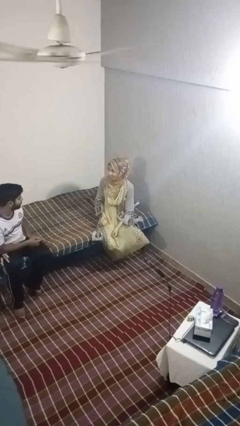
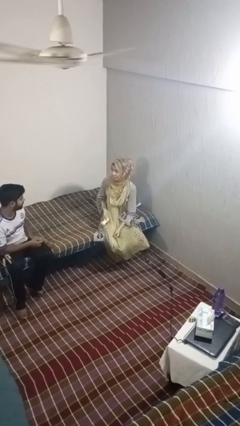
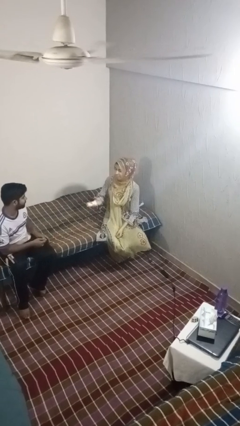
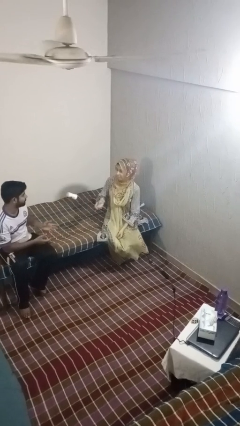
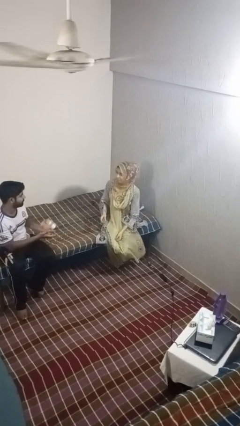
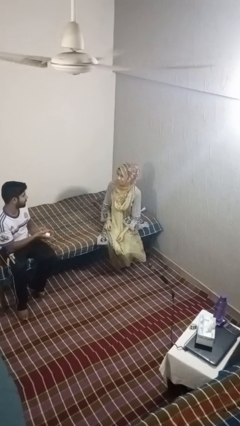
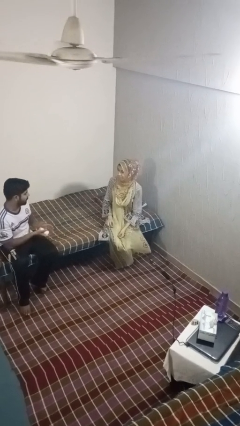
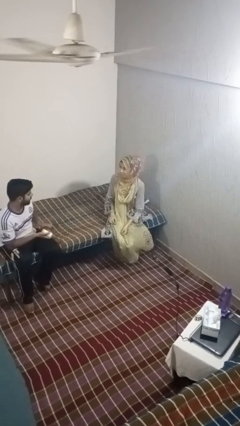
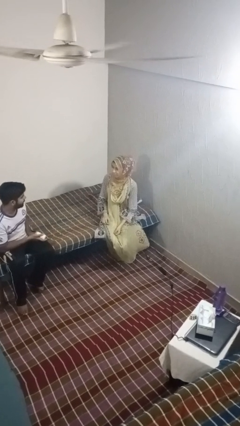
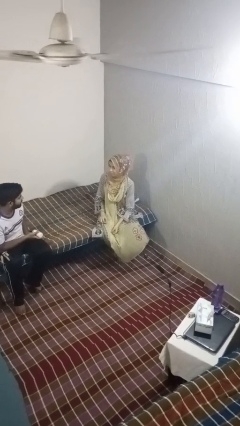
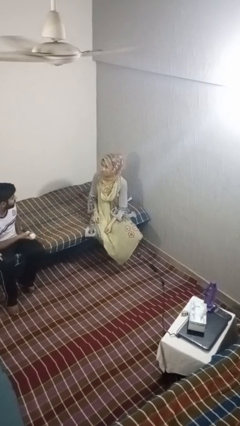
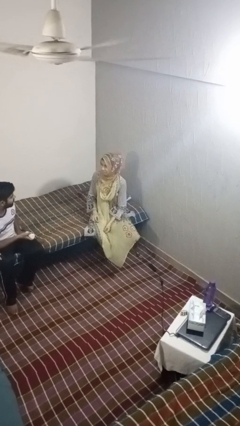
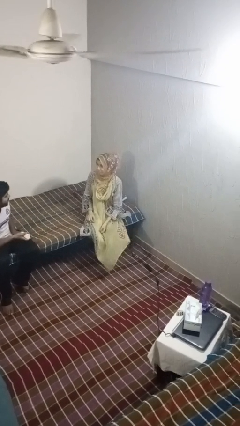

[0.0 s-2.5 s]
person throws object to person

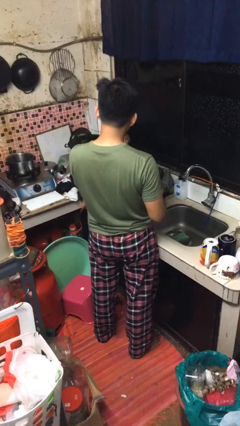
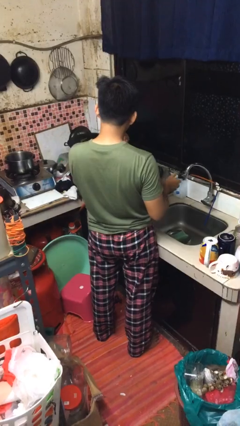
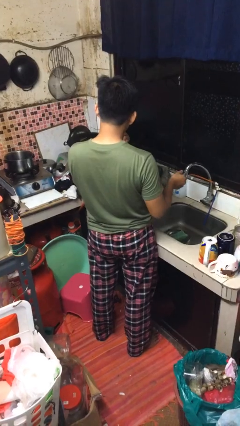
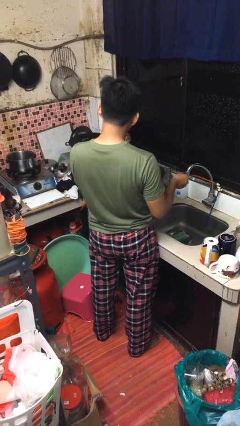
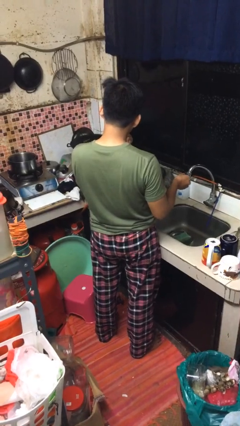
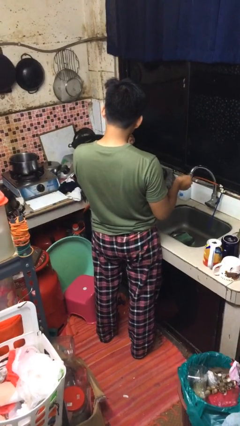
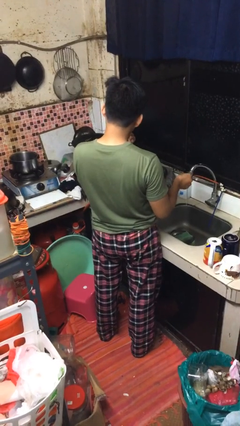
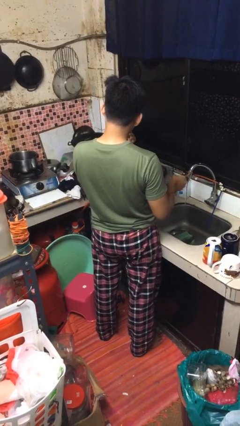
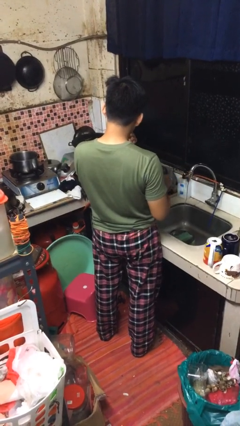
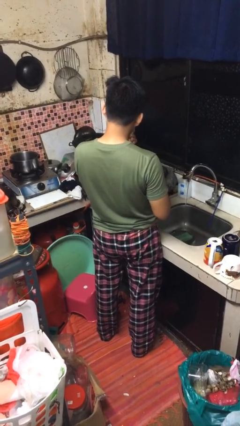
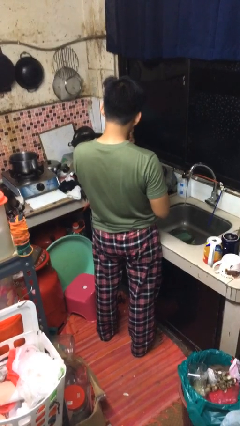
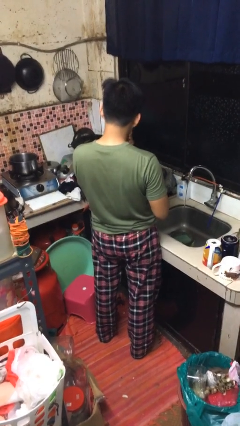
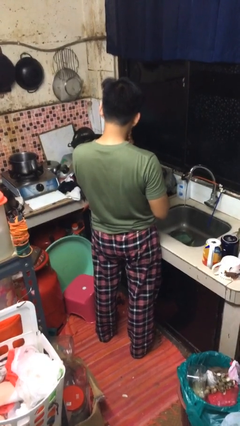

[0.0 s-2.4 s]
person turns on faucet

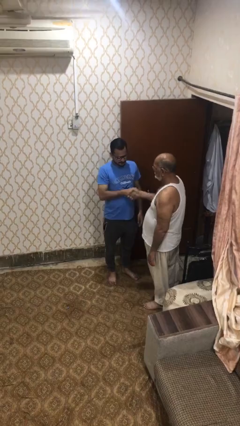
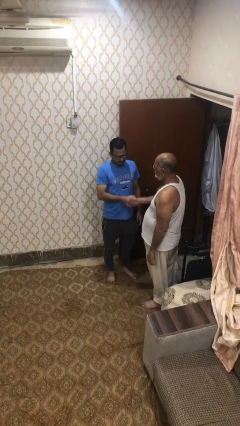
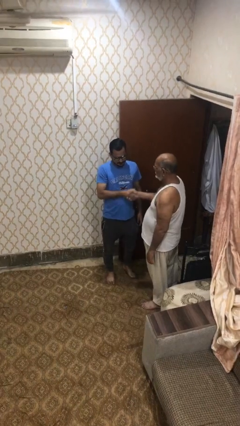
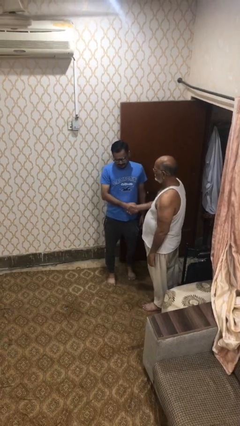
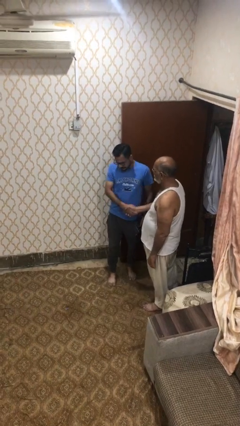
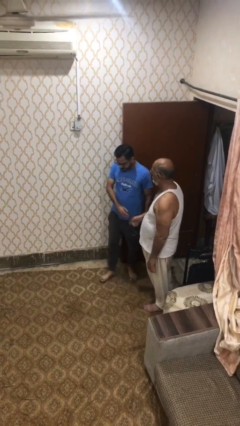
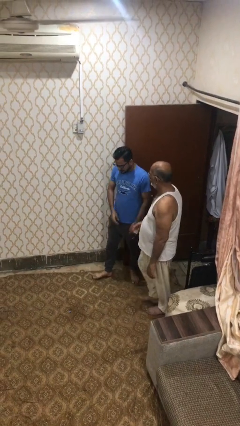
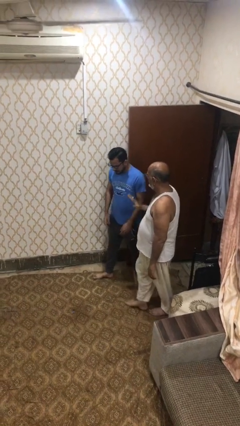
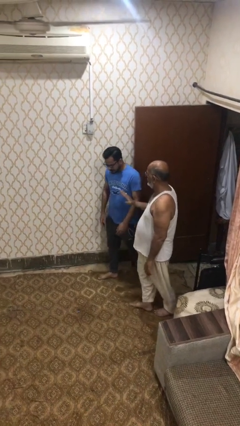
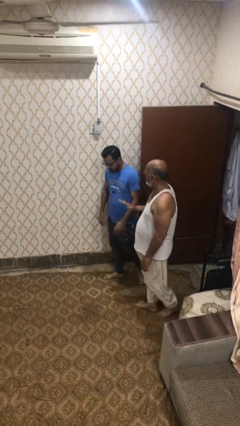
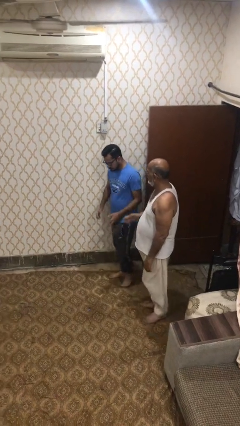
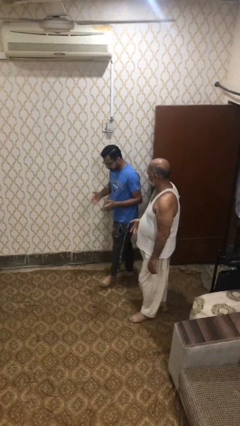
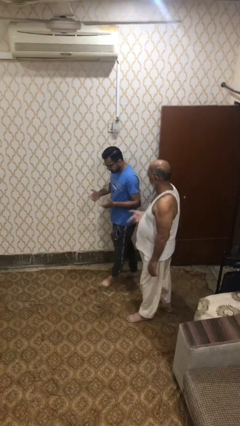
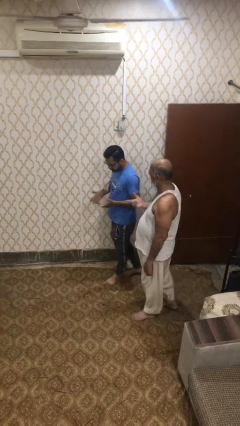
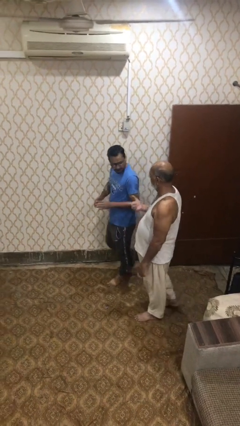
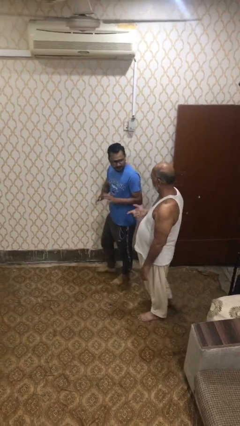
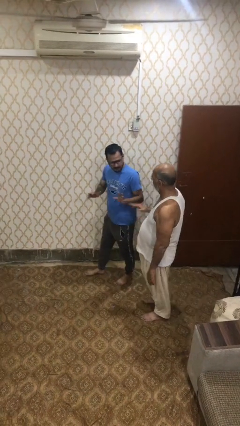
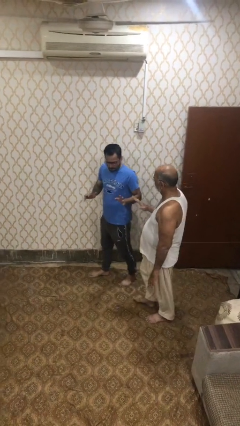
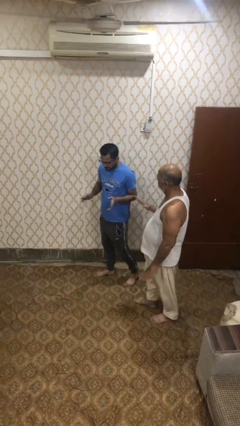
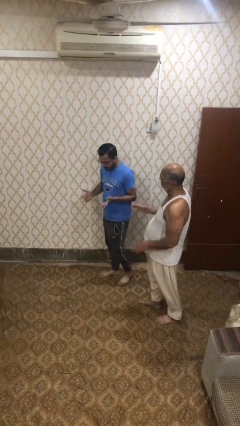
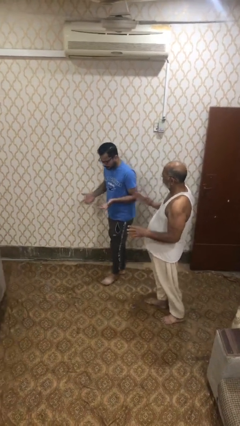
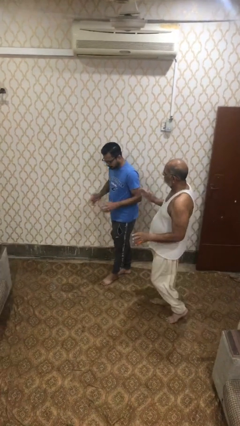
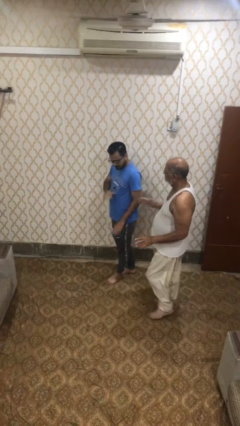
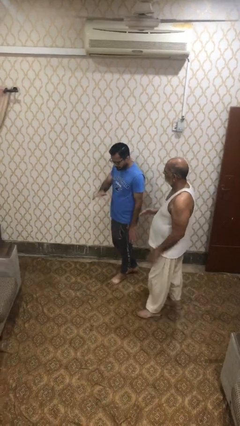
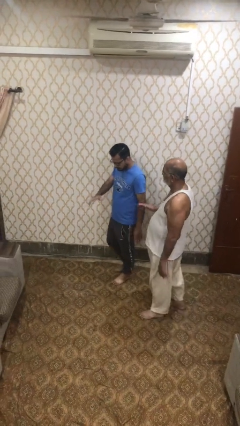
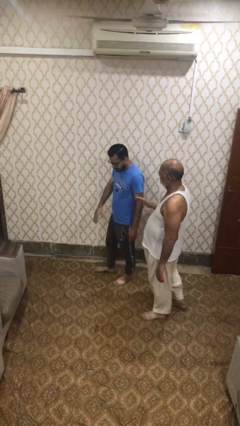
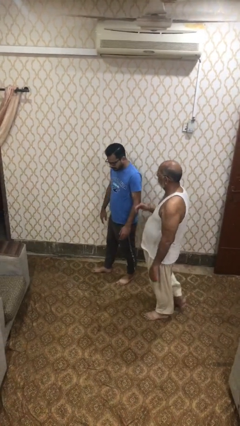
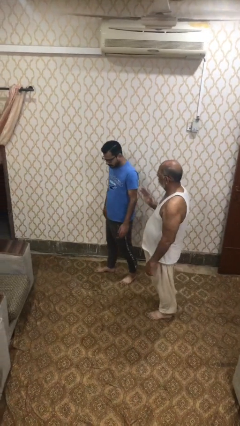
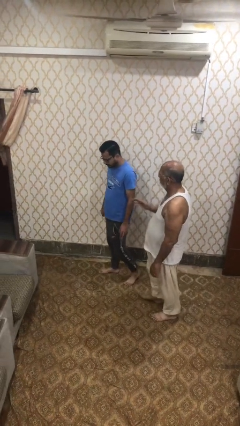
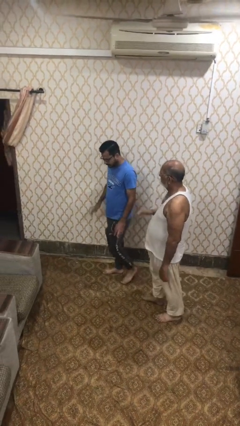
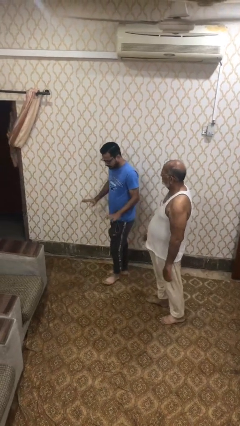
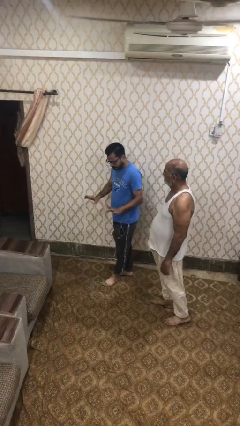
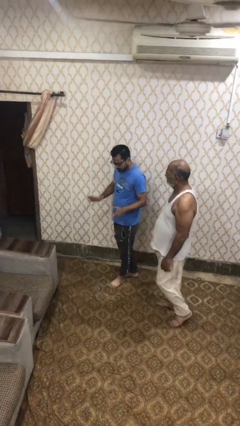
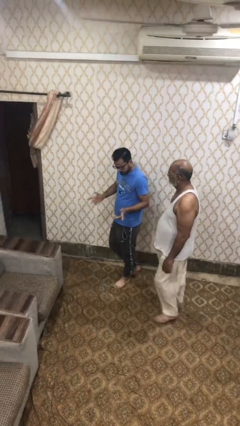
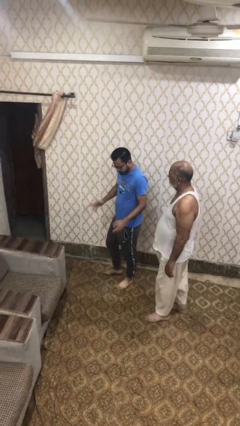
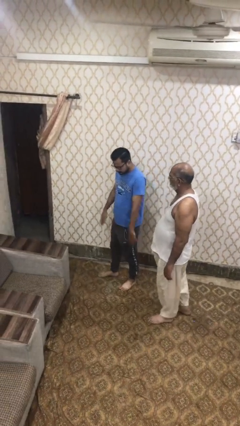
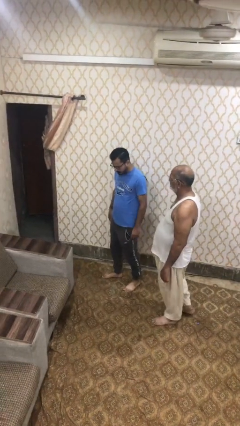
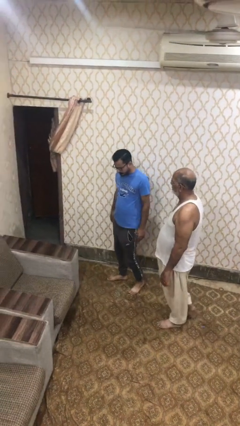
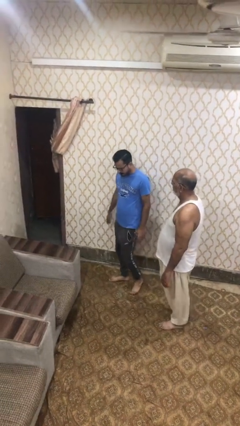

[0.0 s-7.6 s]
person talks to person

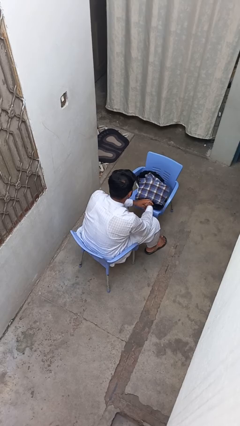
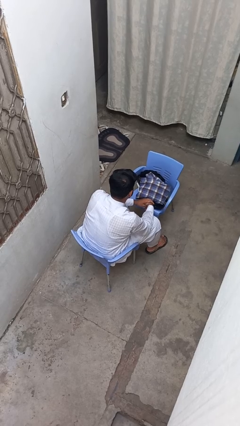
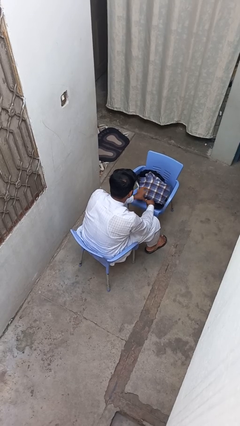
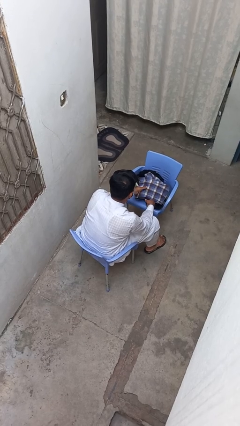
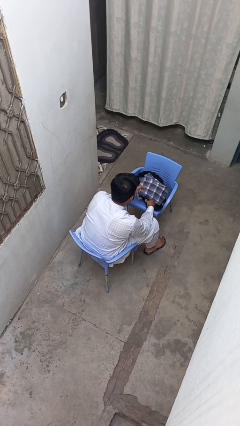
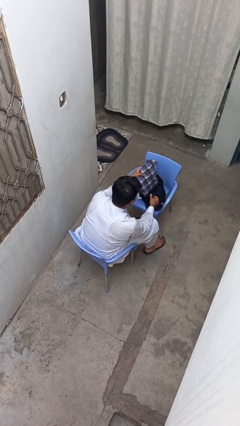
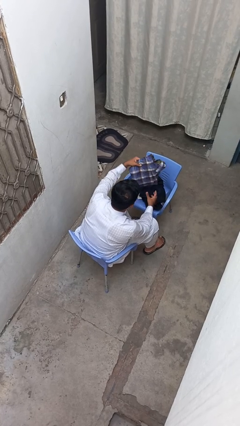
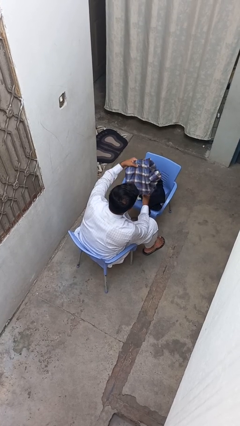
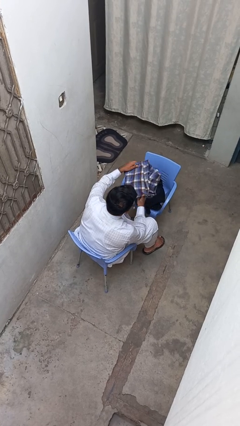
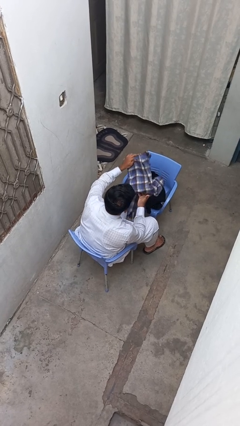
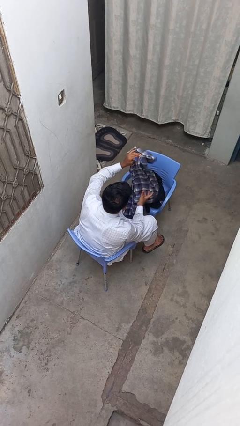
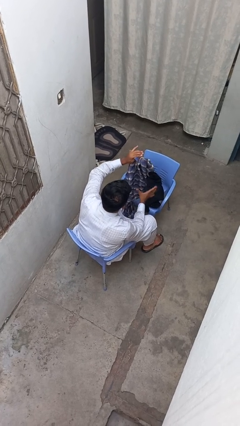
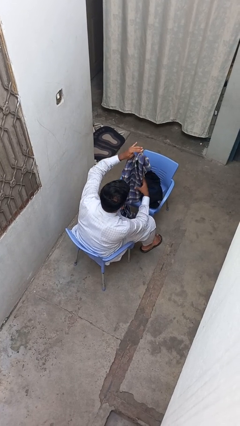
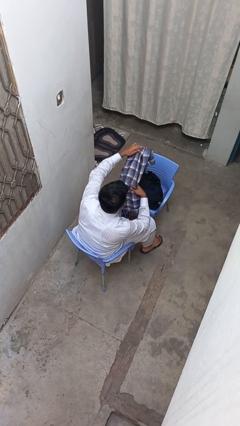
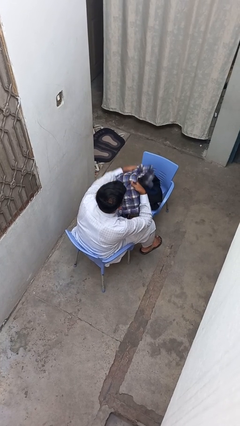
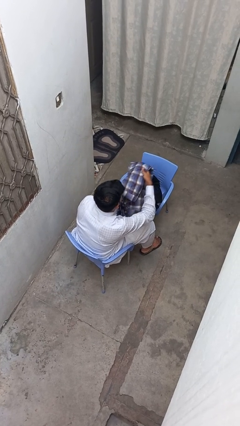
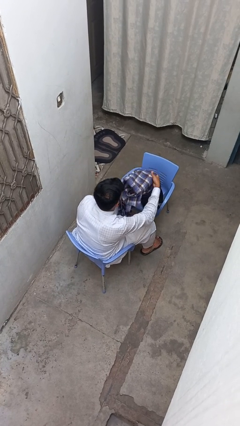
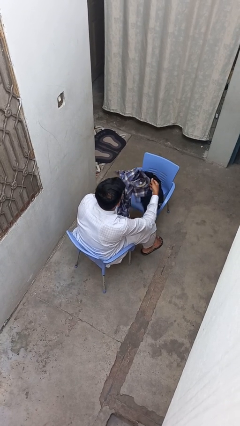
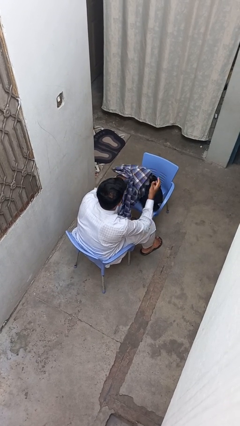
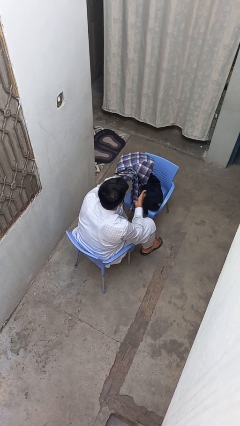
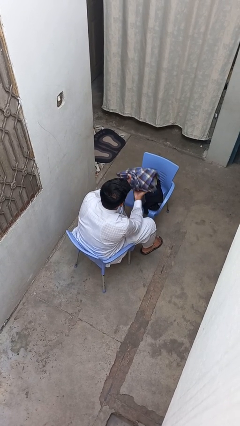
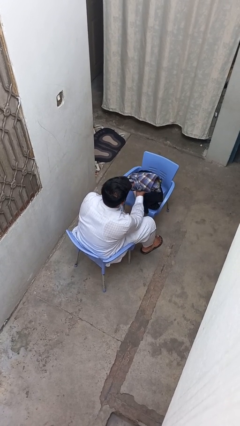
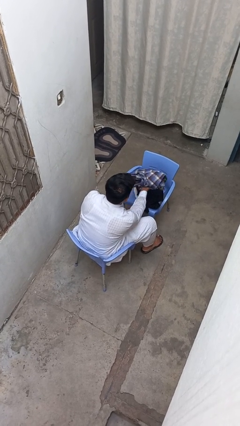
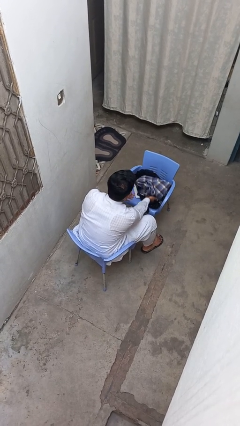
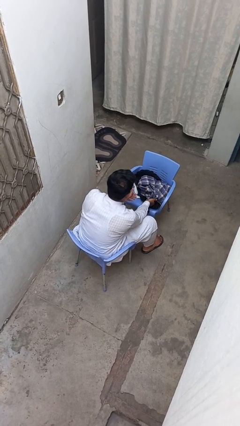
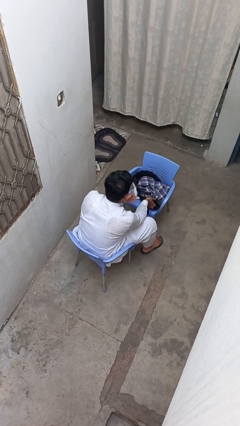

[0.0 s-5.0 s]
person folds shirt

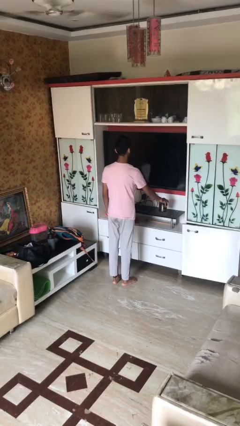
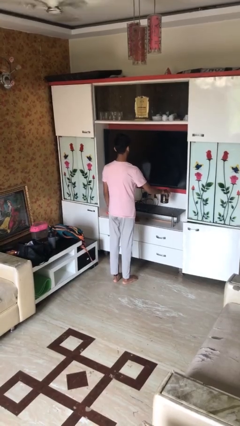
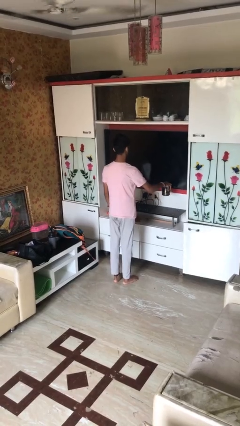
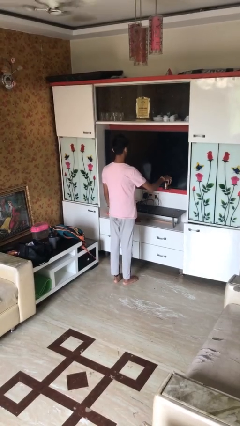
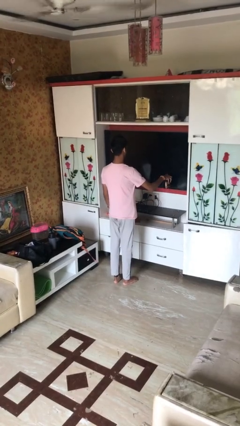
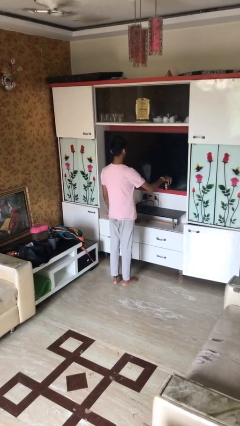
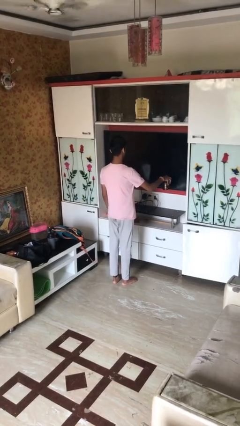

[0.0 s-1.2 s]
person picks up object from countertop
